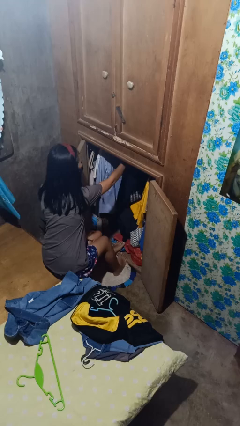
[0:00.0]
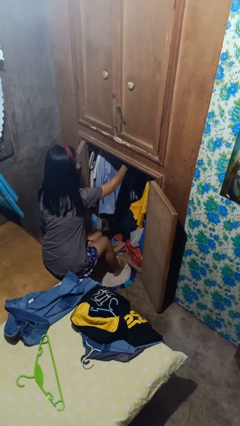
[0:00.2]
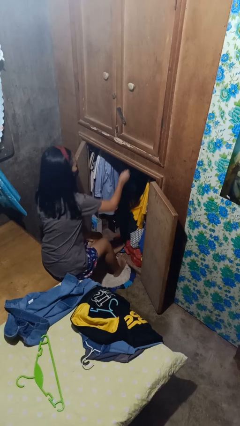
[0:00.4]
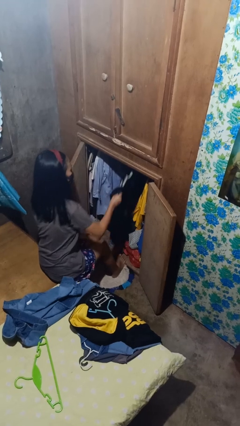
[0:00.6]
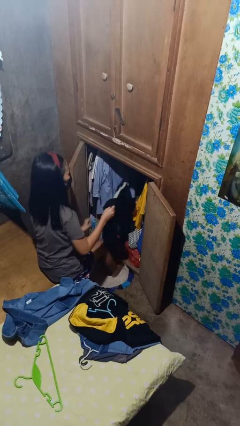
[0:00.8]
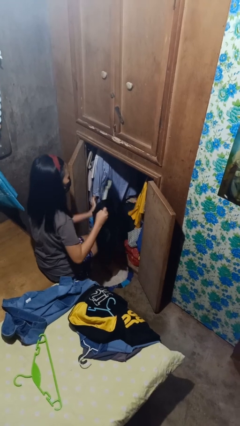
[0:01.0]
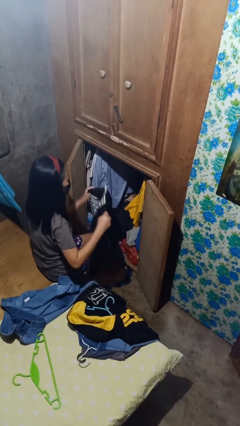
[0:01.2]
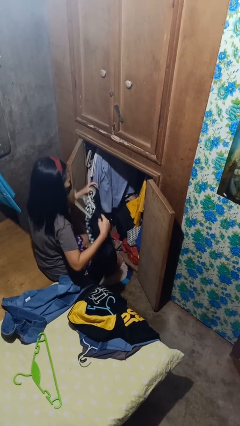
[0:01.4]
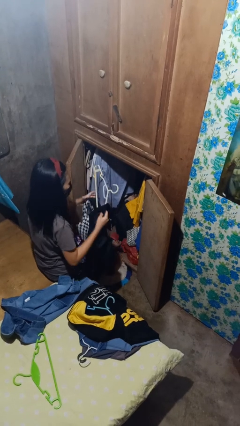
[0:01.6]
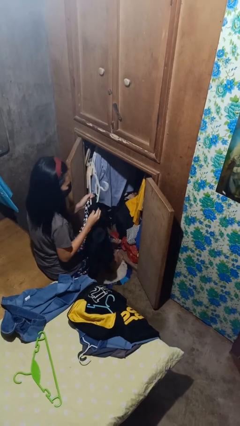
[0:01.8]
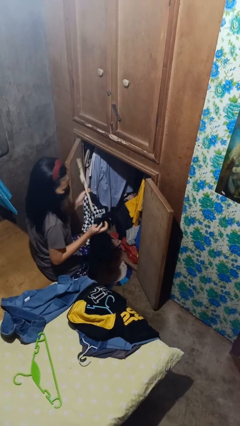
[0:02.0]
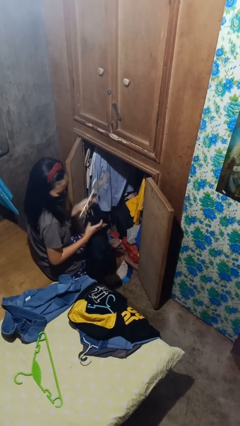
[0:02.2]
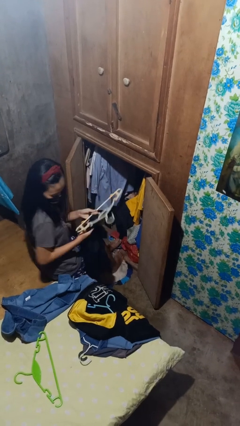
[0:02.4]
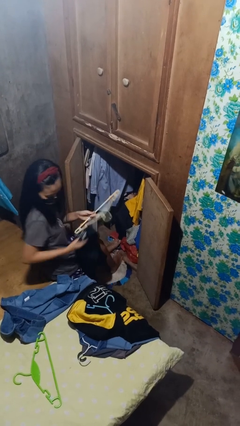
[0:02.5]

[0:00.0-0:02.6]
person takes clothes from closet

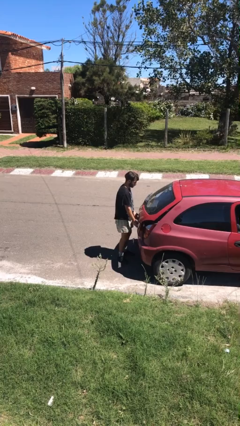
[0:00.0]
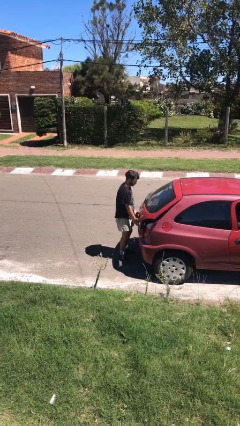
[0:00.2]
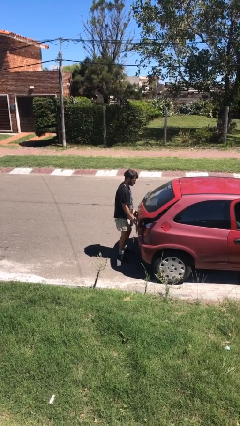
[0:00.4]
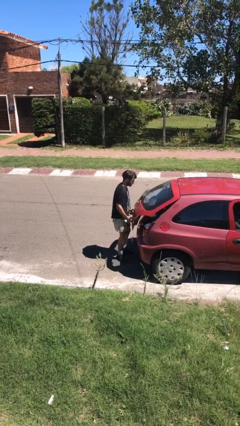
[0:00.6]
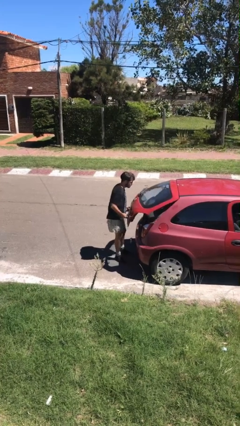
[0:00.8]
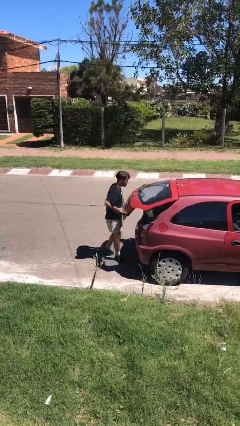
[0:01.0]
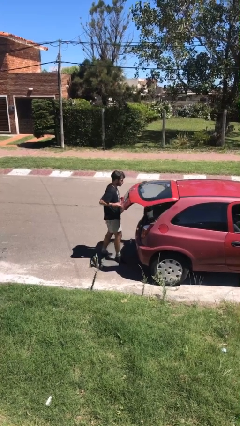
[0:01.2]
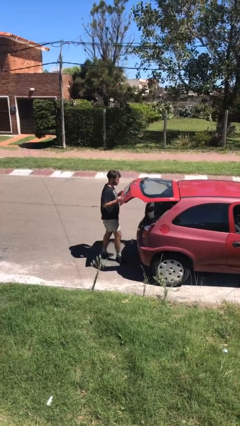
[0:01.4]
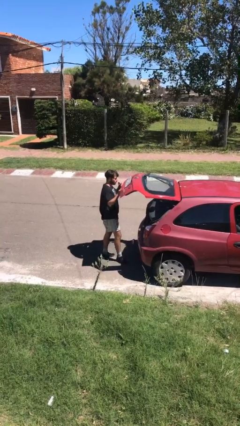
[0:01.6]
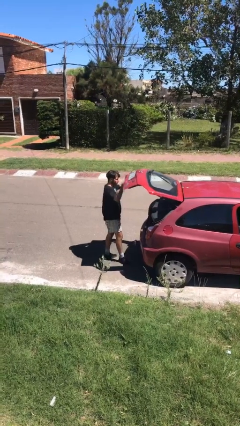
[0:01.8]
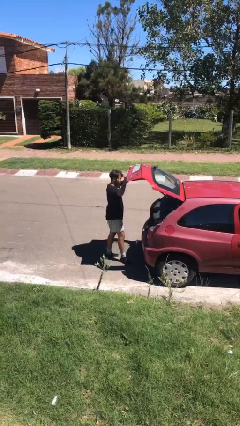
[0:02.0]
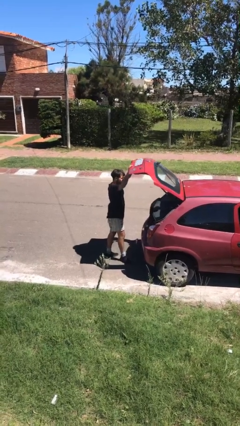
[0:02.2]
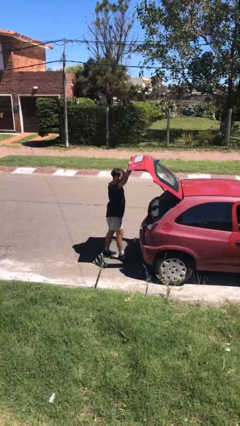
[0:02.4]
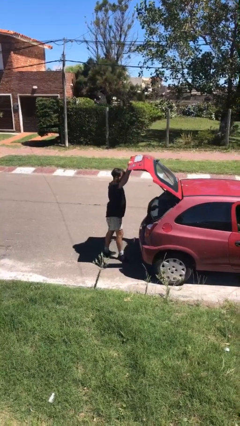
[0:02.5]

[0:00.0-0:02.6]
person opens car trunk

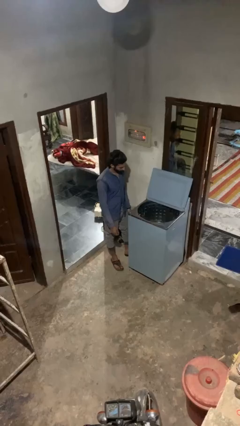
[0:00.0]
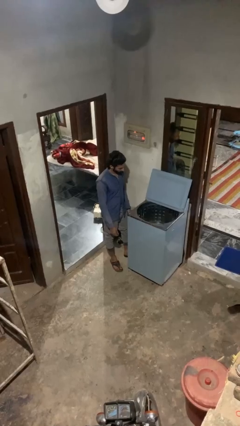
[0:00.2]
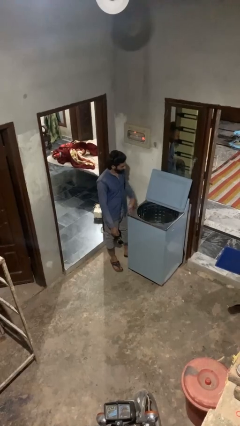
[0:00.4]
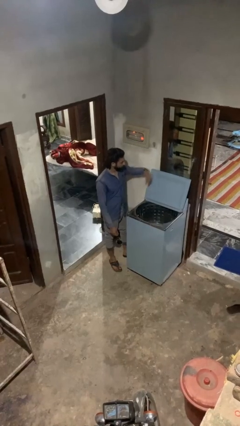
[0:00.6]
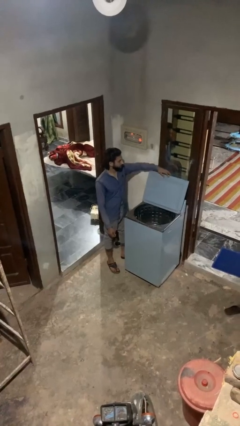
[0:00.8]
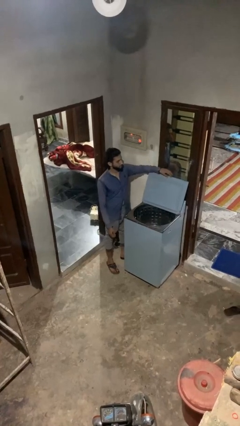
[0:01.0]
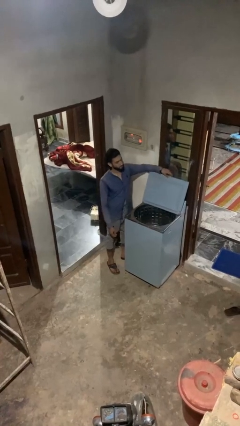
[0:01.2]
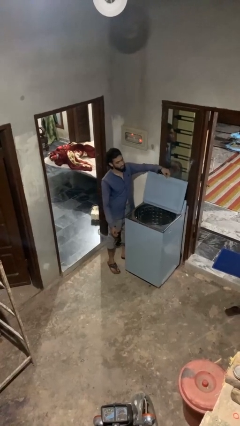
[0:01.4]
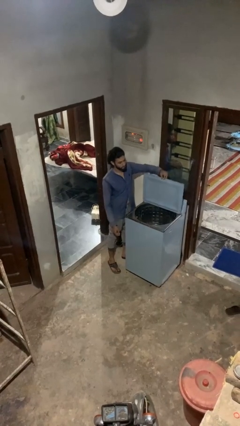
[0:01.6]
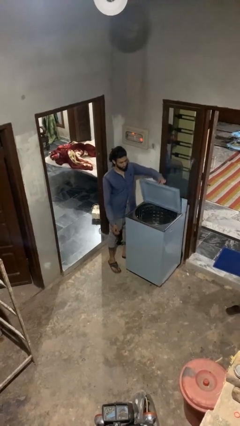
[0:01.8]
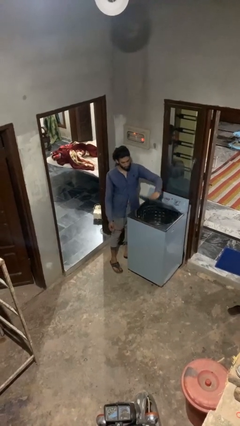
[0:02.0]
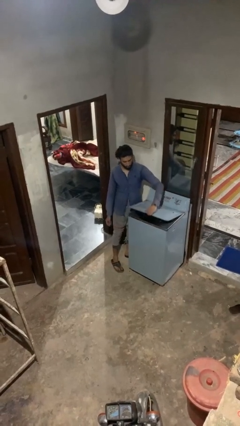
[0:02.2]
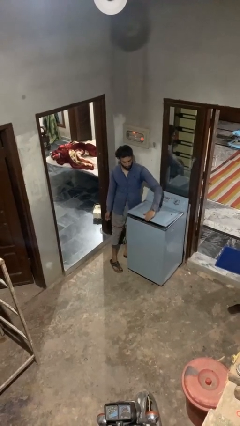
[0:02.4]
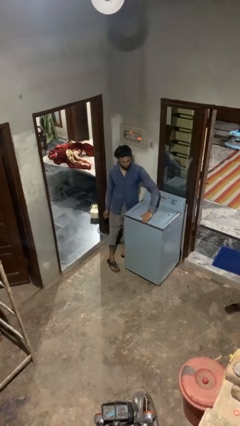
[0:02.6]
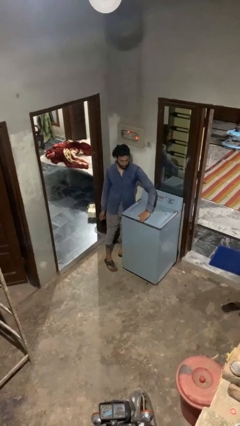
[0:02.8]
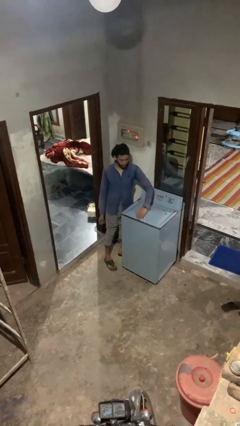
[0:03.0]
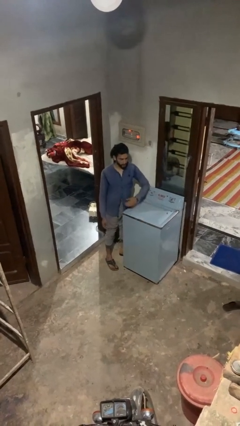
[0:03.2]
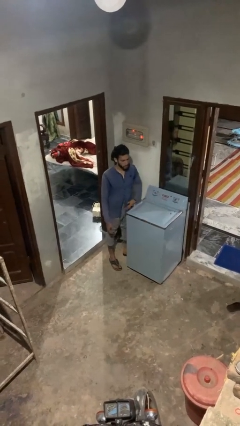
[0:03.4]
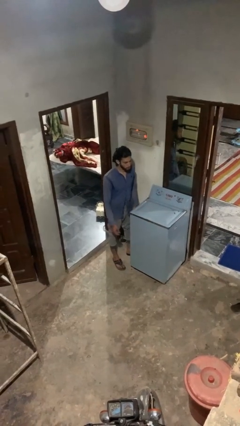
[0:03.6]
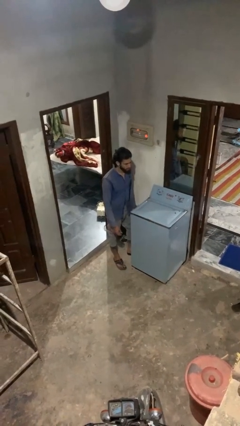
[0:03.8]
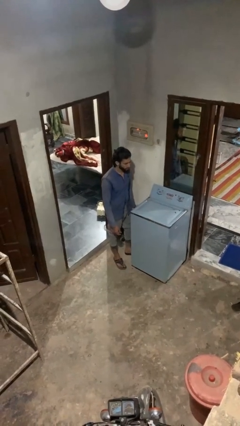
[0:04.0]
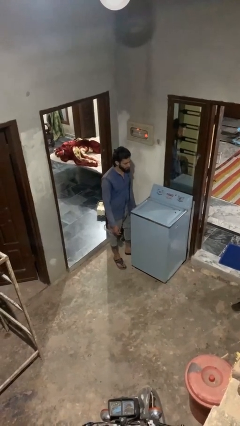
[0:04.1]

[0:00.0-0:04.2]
person closes clothes washer

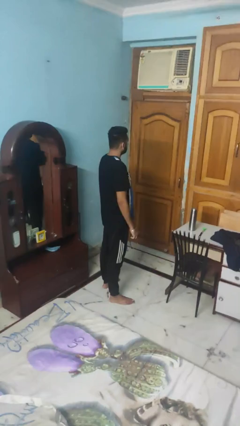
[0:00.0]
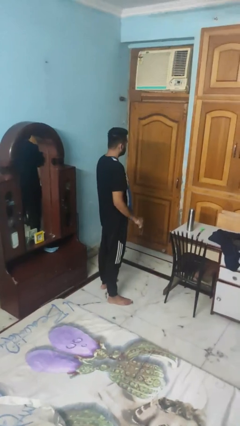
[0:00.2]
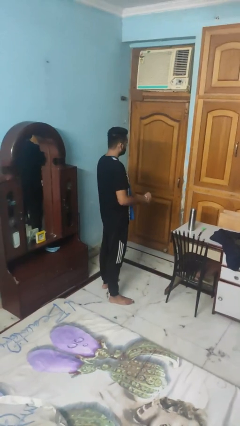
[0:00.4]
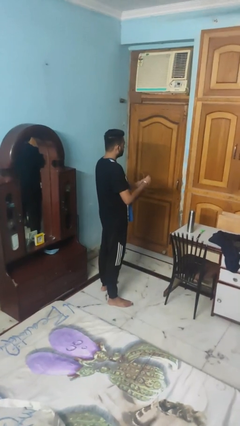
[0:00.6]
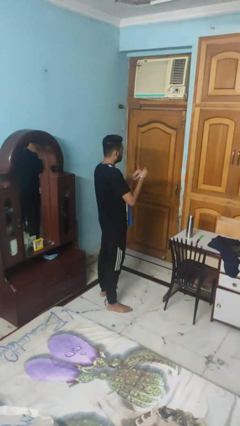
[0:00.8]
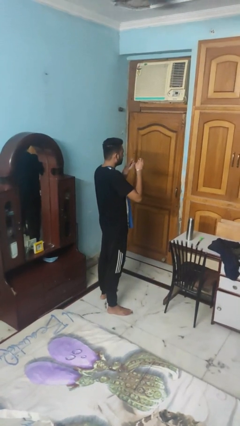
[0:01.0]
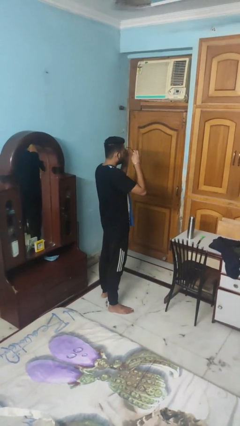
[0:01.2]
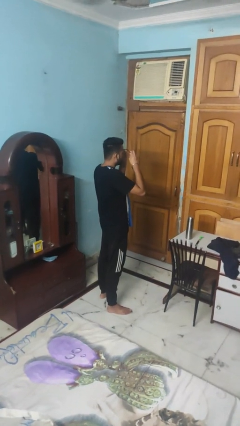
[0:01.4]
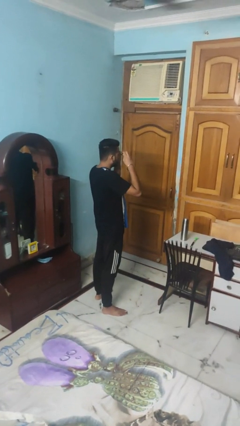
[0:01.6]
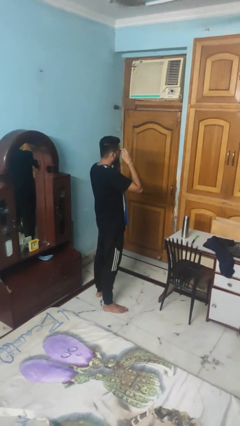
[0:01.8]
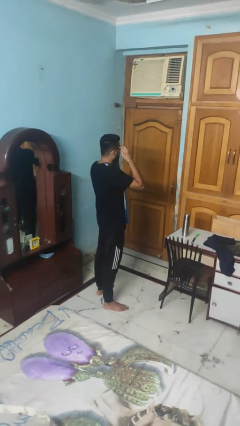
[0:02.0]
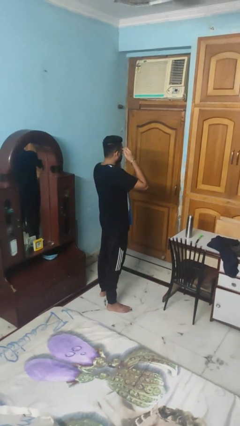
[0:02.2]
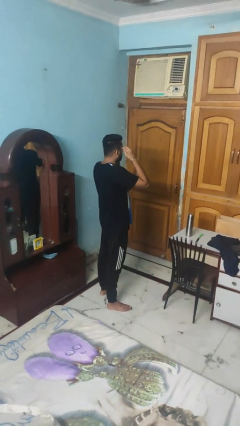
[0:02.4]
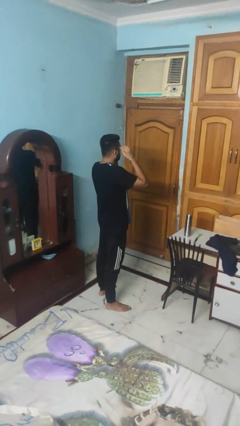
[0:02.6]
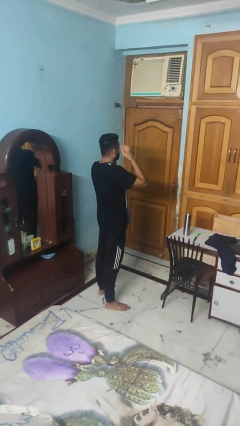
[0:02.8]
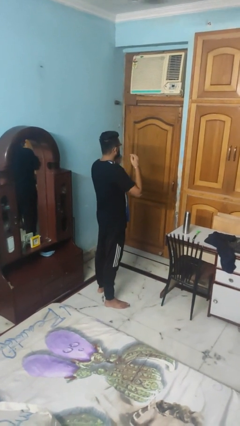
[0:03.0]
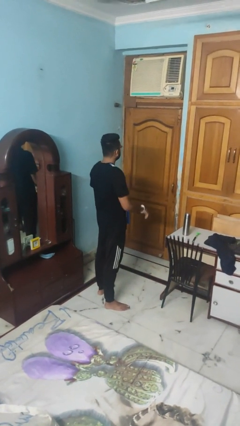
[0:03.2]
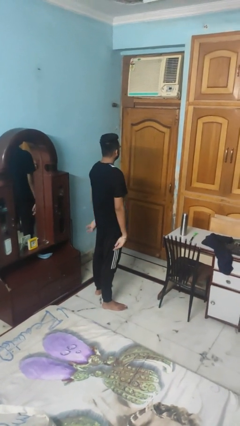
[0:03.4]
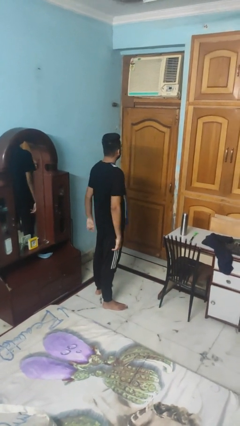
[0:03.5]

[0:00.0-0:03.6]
person puts on glasses

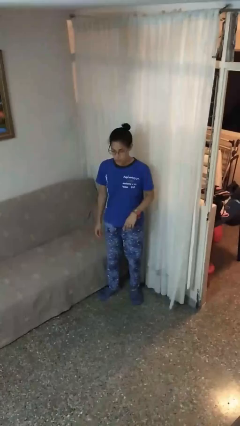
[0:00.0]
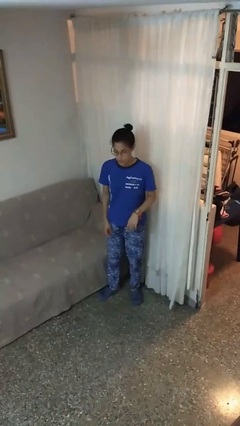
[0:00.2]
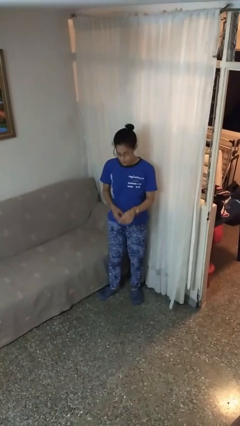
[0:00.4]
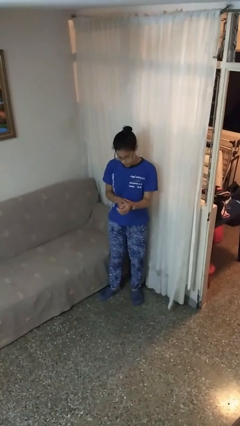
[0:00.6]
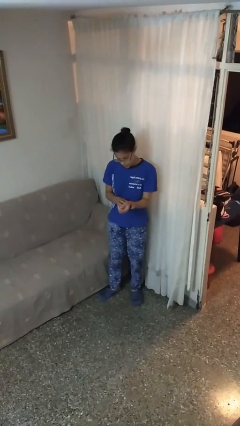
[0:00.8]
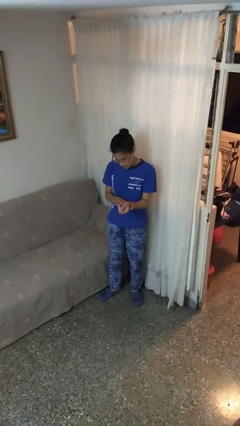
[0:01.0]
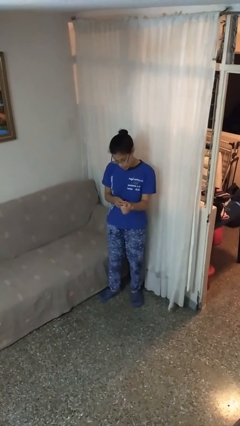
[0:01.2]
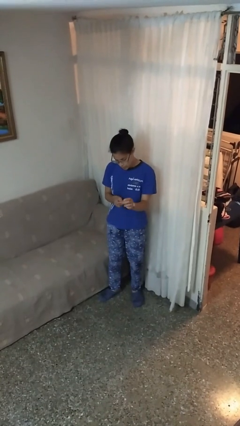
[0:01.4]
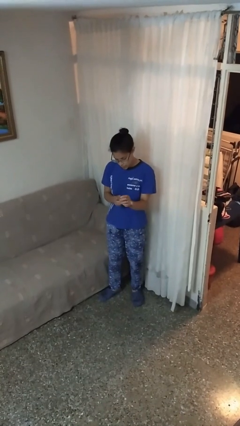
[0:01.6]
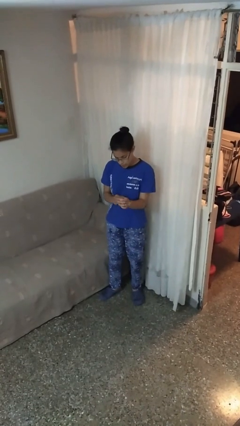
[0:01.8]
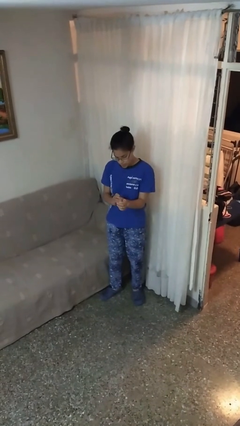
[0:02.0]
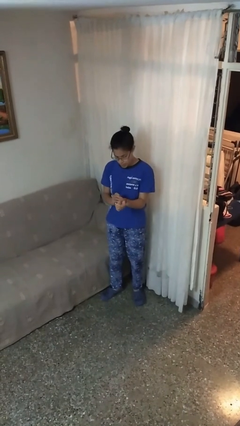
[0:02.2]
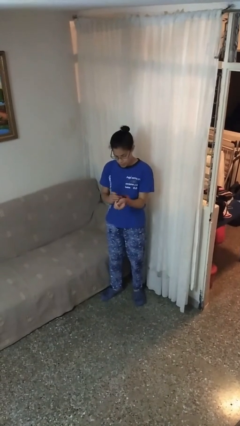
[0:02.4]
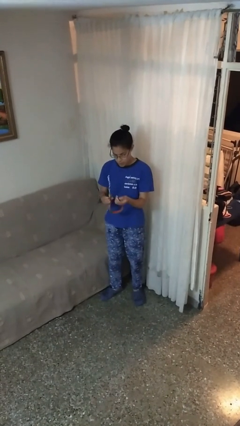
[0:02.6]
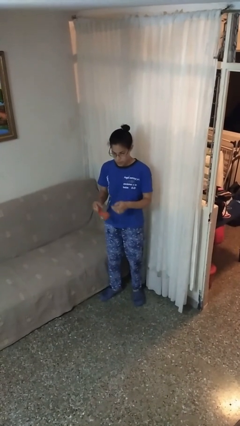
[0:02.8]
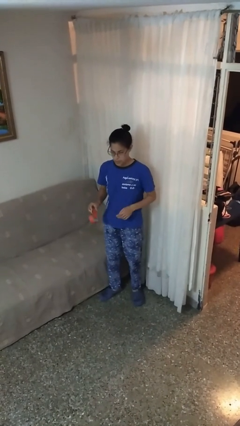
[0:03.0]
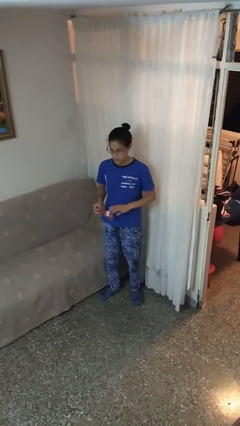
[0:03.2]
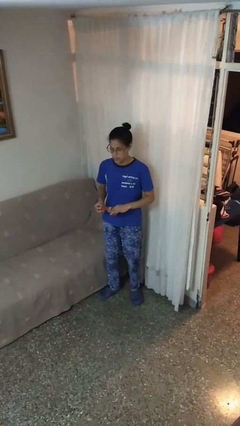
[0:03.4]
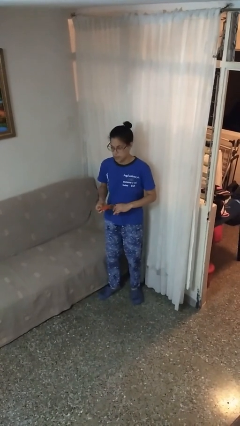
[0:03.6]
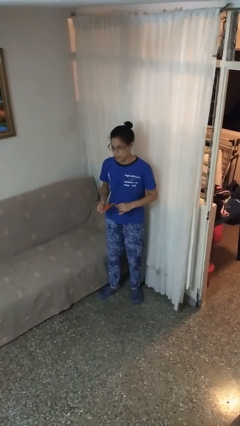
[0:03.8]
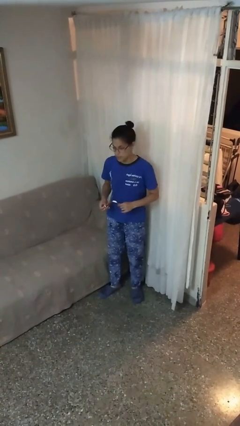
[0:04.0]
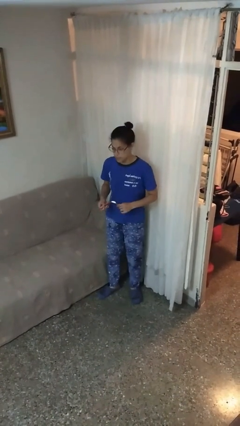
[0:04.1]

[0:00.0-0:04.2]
person takes off wristwatch

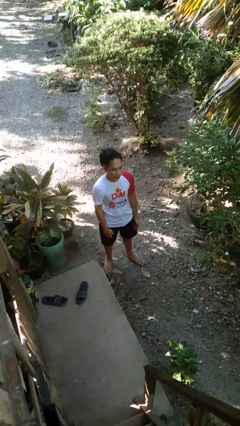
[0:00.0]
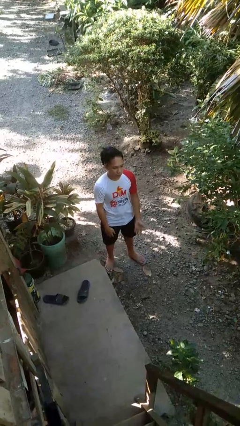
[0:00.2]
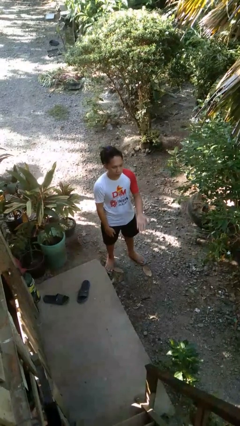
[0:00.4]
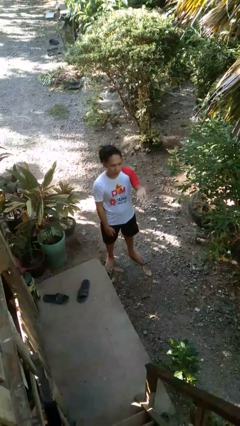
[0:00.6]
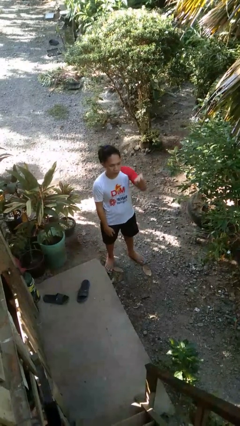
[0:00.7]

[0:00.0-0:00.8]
person gestures swipe up
